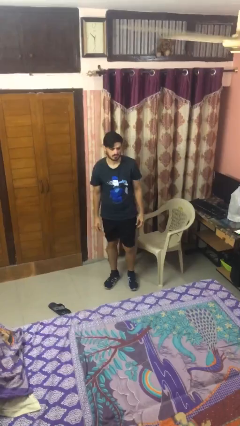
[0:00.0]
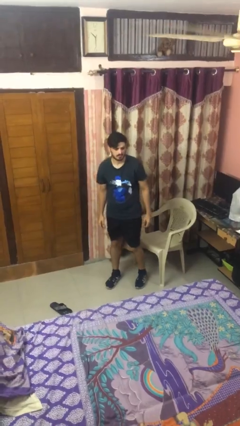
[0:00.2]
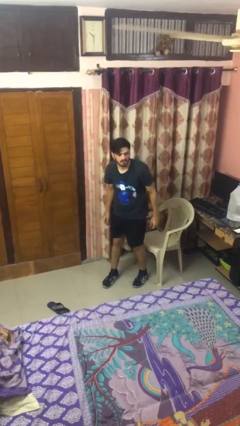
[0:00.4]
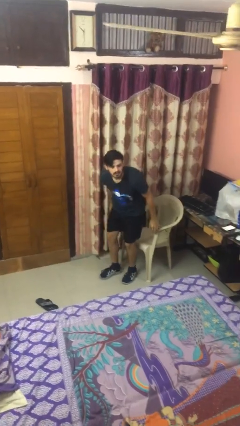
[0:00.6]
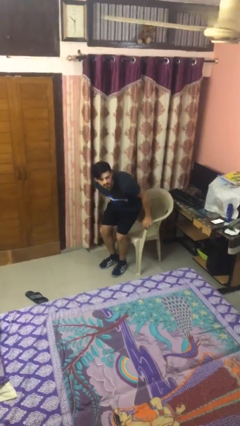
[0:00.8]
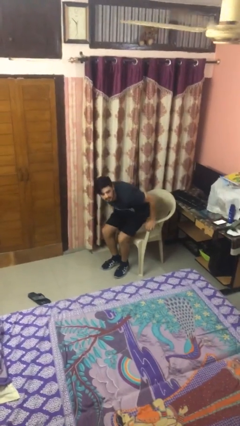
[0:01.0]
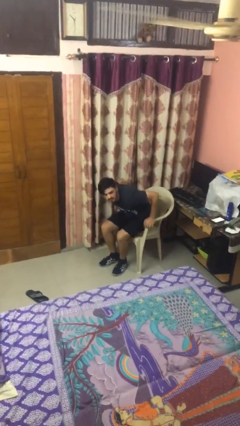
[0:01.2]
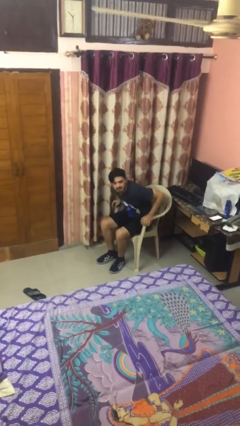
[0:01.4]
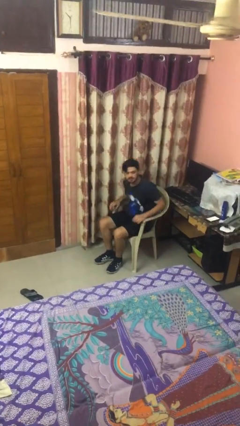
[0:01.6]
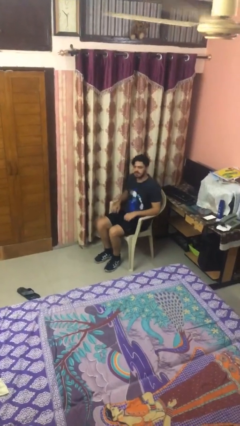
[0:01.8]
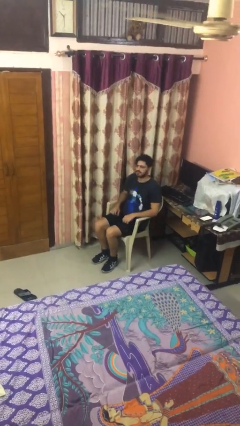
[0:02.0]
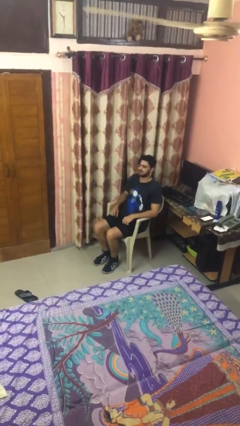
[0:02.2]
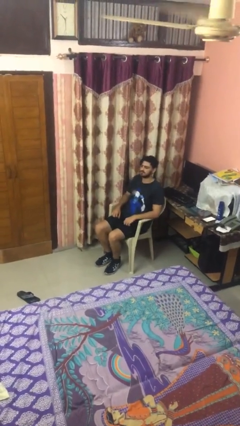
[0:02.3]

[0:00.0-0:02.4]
person sits down

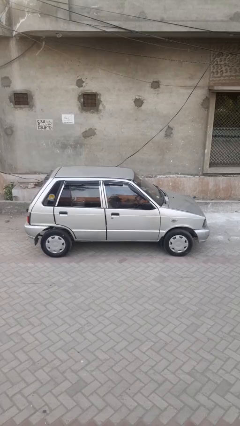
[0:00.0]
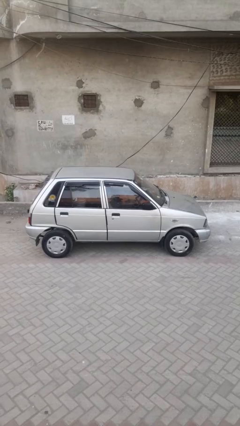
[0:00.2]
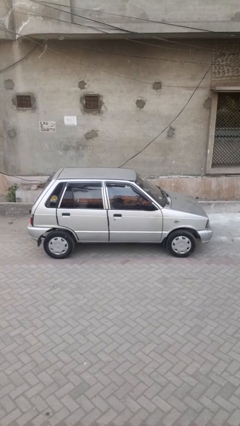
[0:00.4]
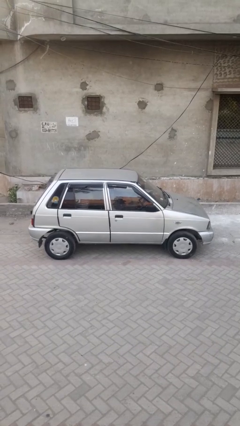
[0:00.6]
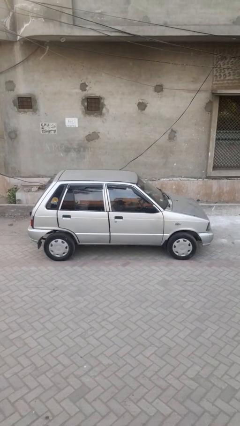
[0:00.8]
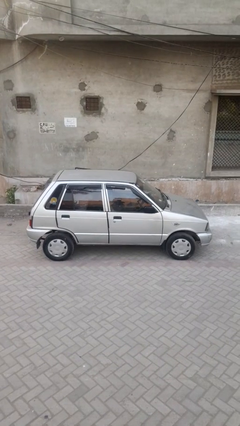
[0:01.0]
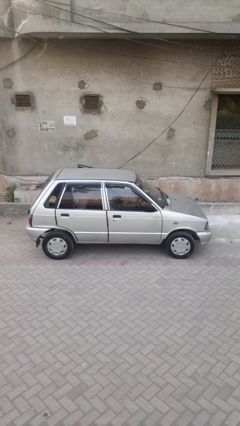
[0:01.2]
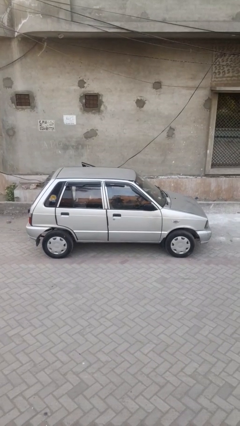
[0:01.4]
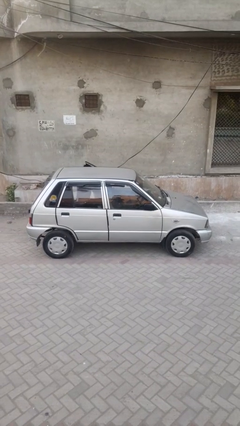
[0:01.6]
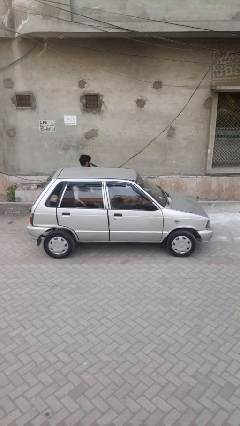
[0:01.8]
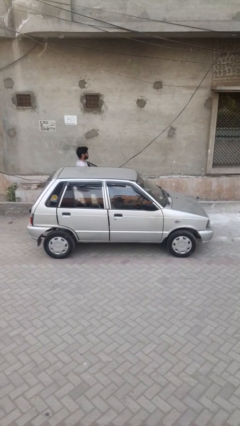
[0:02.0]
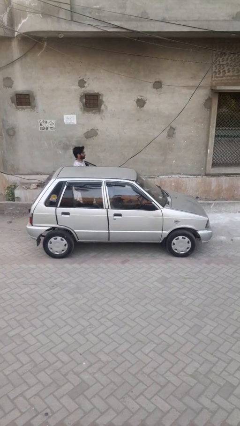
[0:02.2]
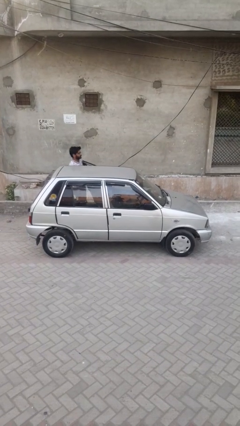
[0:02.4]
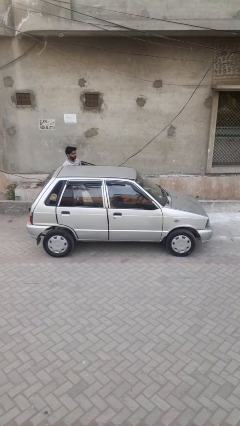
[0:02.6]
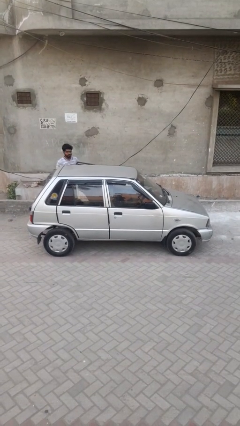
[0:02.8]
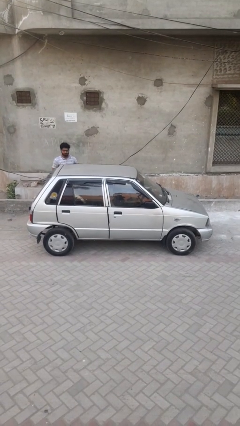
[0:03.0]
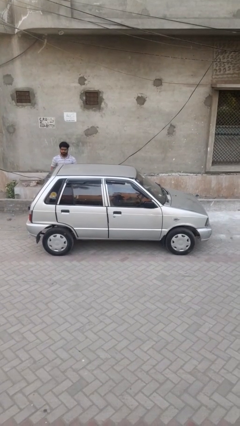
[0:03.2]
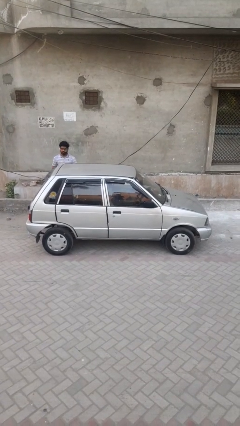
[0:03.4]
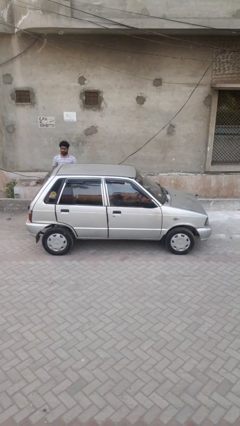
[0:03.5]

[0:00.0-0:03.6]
car drops off person

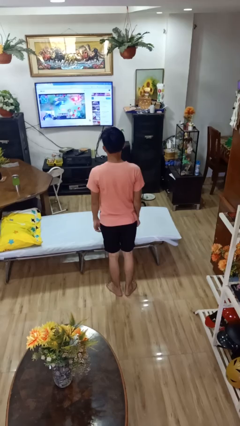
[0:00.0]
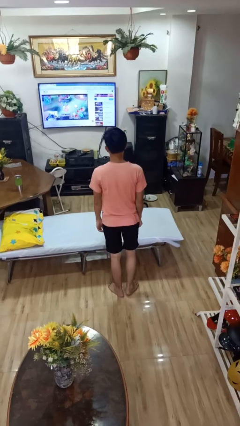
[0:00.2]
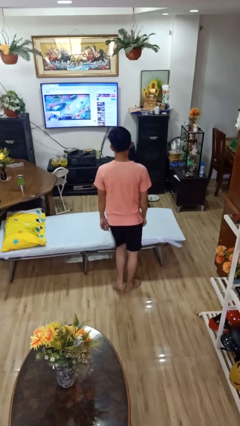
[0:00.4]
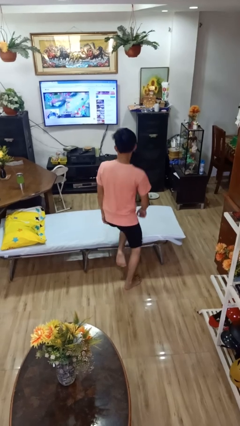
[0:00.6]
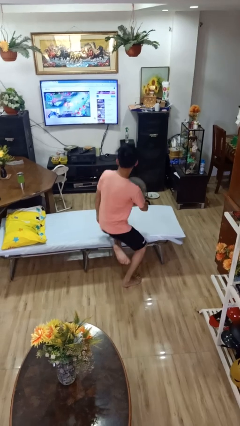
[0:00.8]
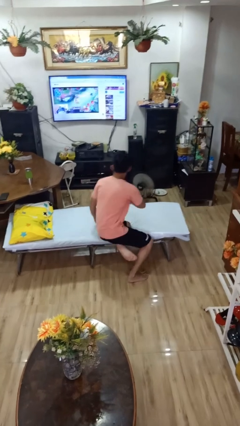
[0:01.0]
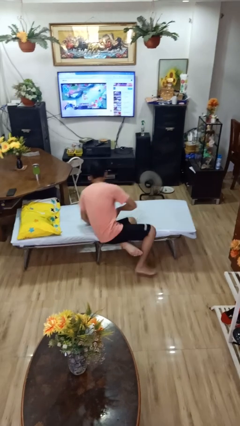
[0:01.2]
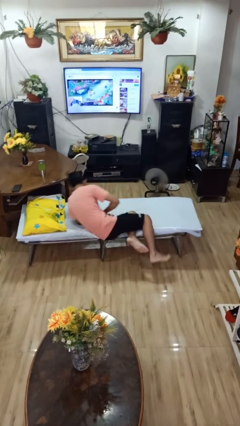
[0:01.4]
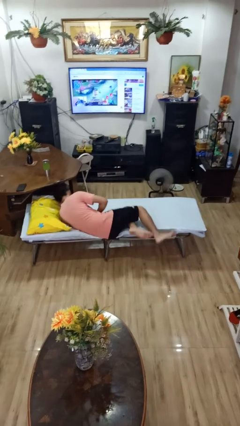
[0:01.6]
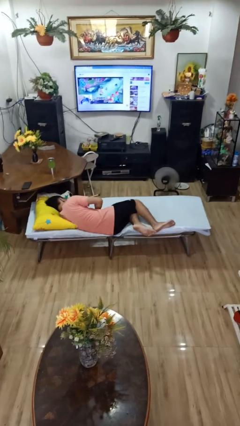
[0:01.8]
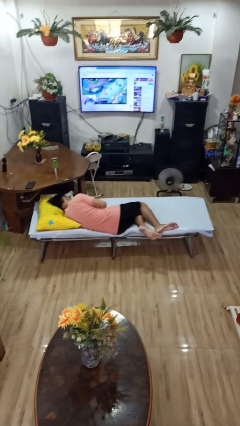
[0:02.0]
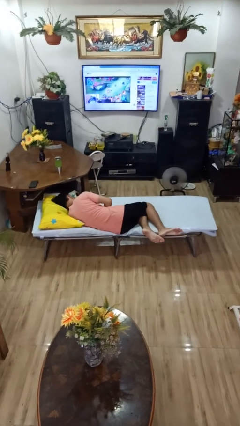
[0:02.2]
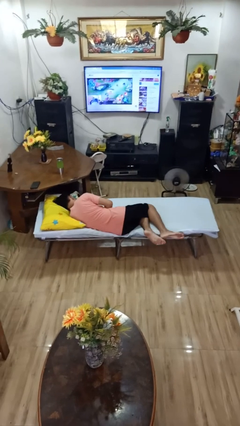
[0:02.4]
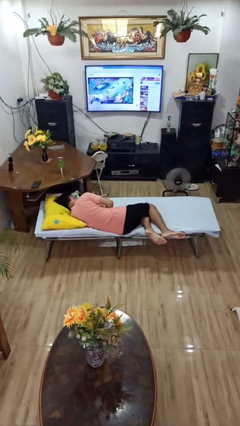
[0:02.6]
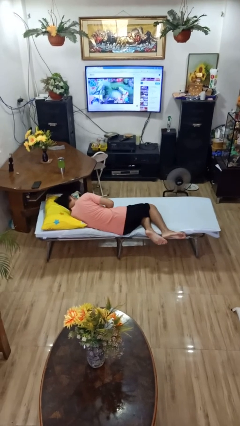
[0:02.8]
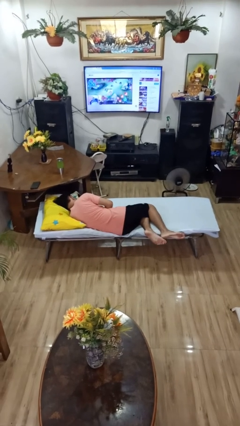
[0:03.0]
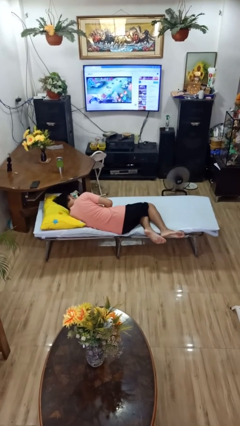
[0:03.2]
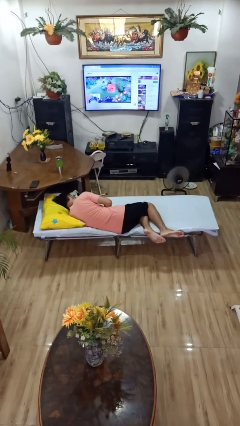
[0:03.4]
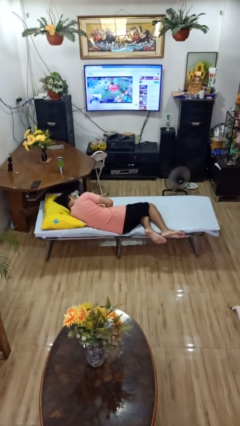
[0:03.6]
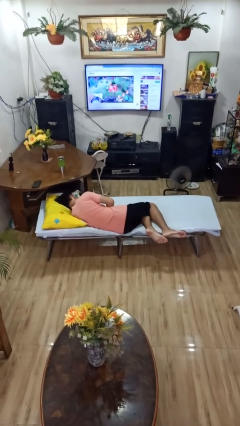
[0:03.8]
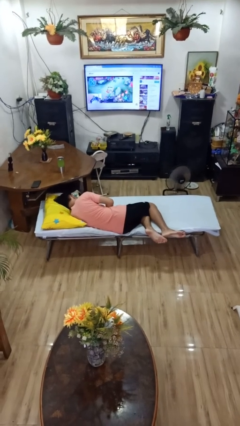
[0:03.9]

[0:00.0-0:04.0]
person lies down on bed

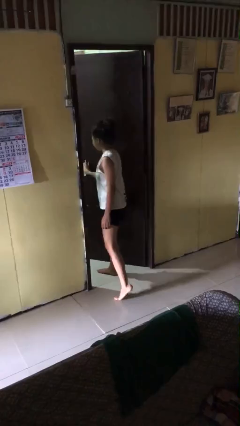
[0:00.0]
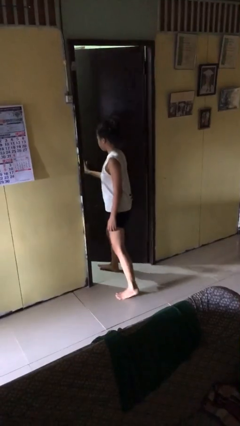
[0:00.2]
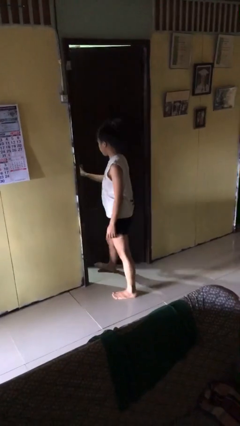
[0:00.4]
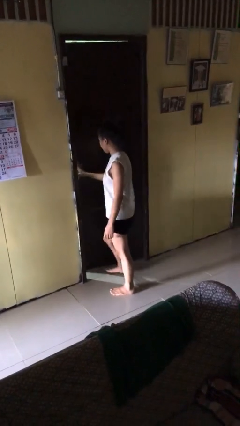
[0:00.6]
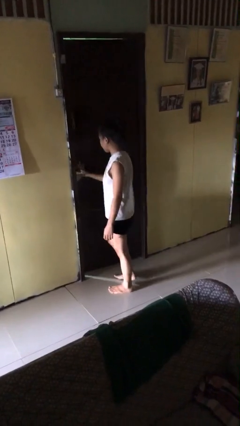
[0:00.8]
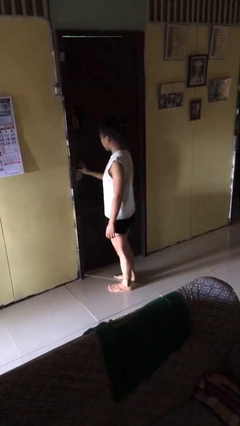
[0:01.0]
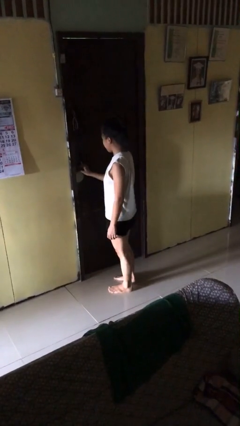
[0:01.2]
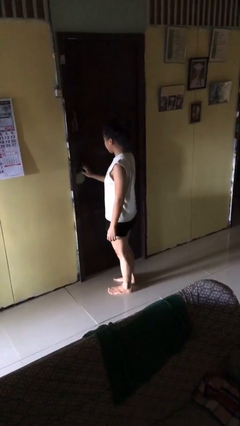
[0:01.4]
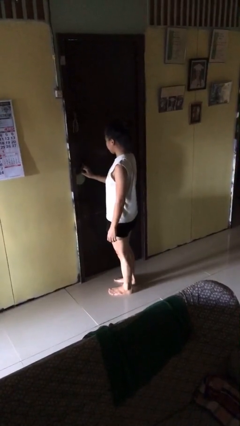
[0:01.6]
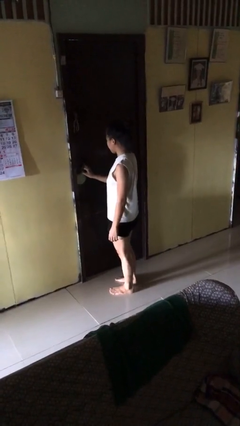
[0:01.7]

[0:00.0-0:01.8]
person closes facility door

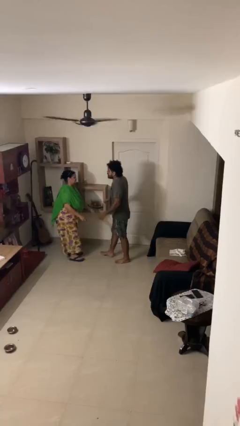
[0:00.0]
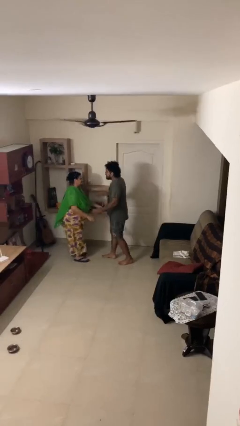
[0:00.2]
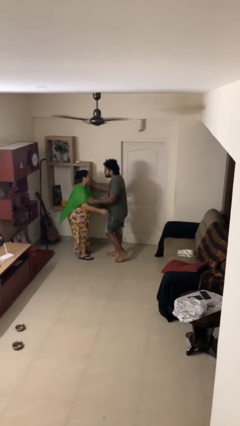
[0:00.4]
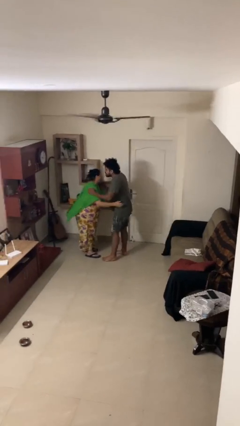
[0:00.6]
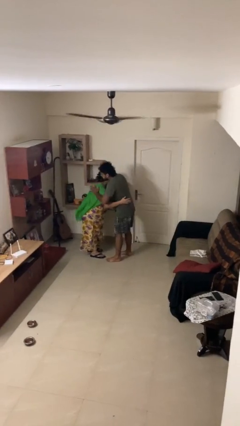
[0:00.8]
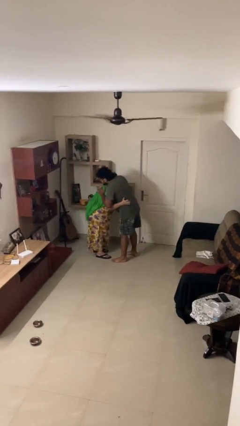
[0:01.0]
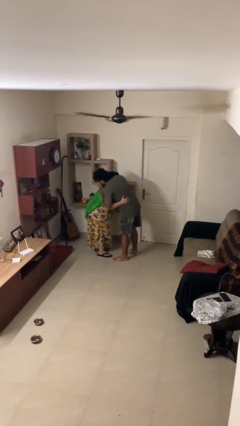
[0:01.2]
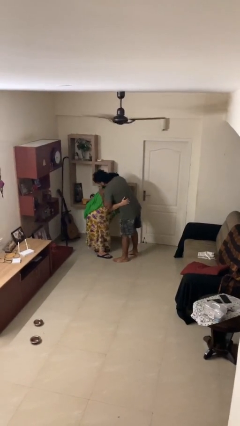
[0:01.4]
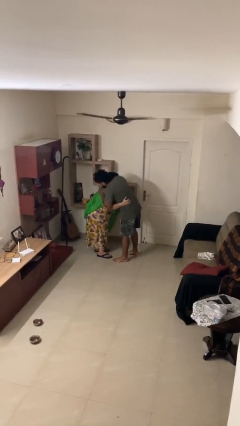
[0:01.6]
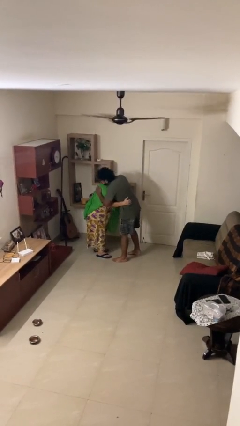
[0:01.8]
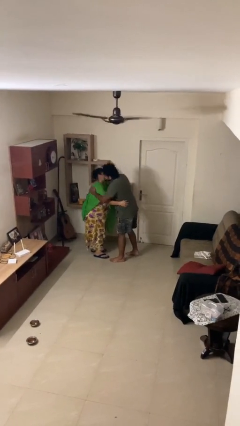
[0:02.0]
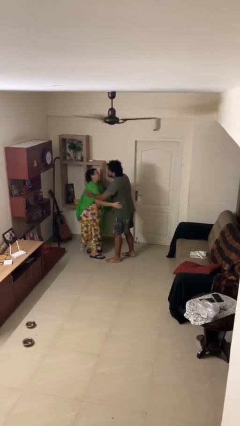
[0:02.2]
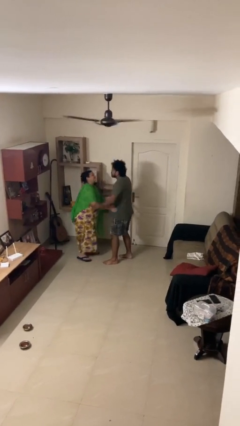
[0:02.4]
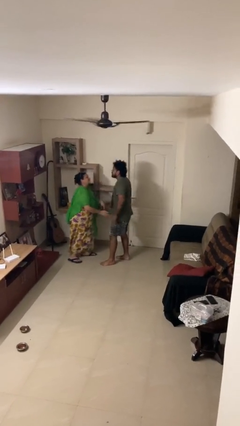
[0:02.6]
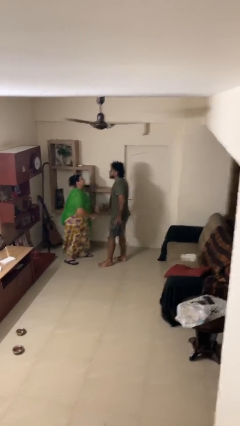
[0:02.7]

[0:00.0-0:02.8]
person embraces person

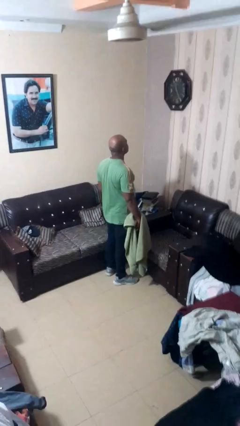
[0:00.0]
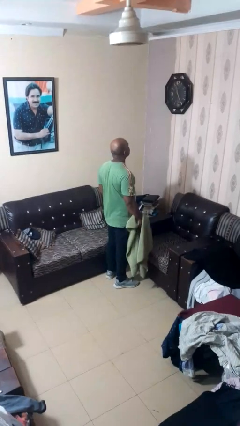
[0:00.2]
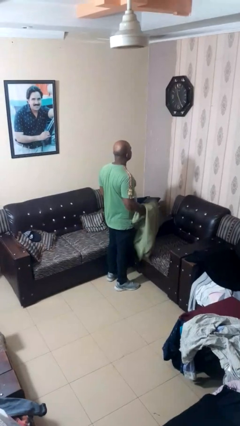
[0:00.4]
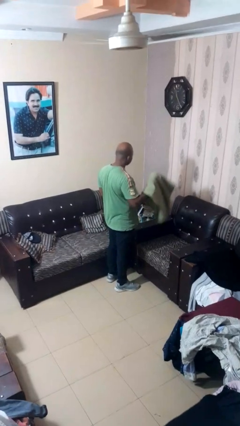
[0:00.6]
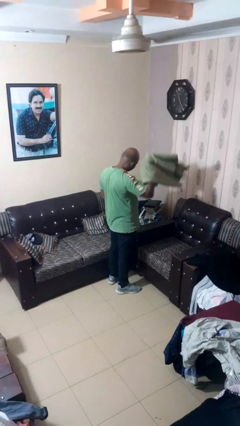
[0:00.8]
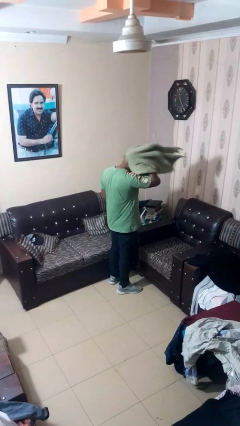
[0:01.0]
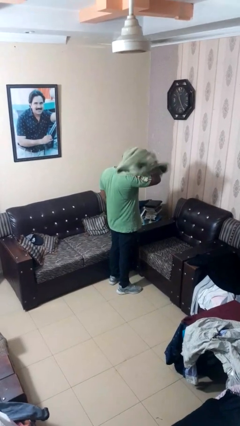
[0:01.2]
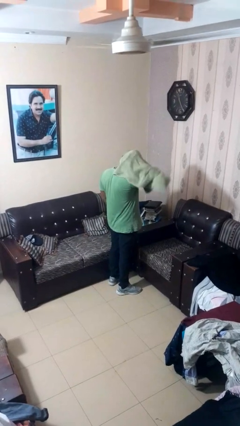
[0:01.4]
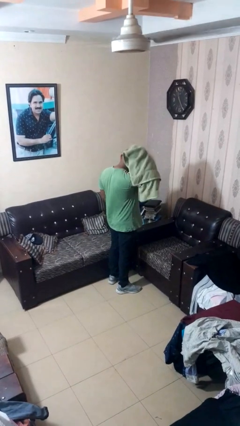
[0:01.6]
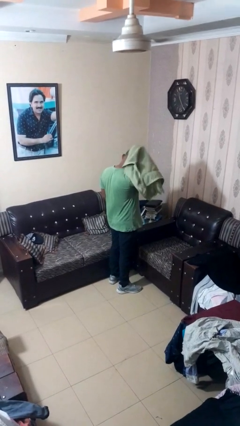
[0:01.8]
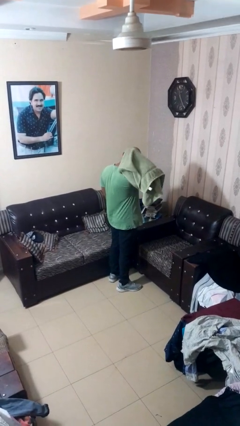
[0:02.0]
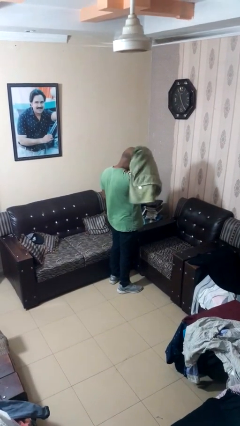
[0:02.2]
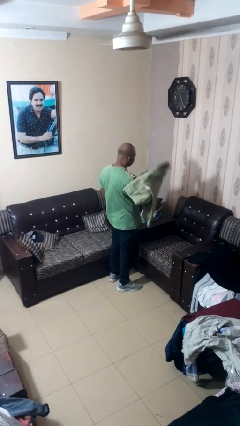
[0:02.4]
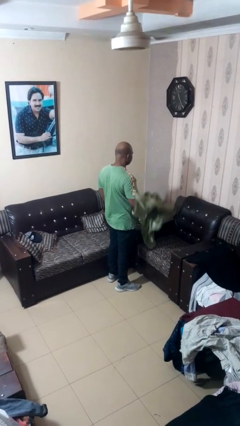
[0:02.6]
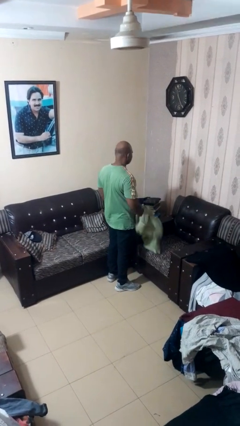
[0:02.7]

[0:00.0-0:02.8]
person dries hair with towel
